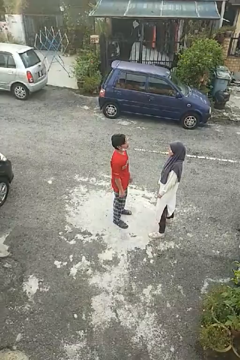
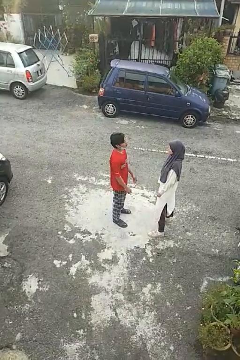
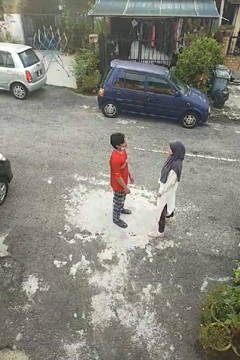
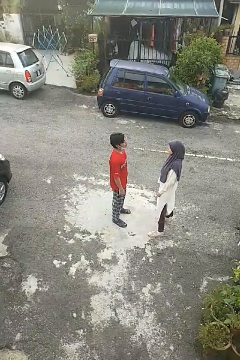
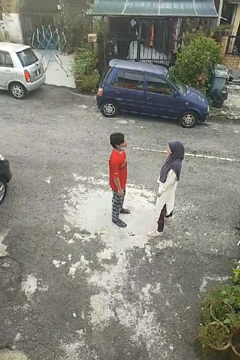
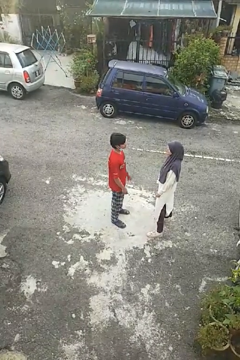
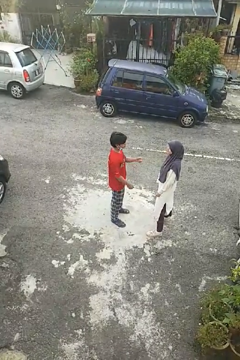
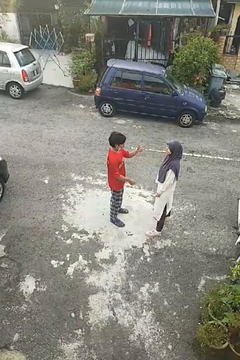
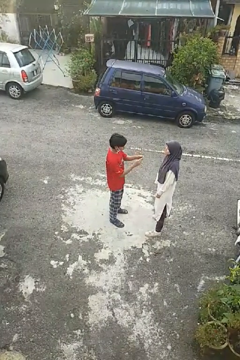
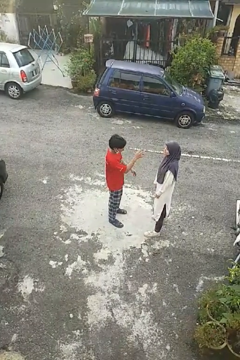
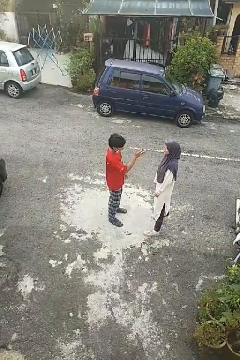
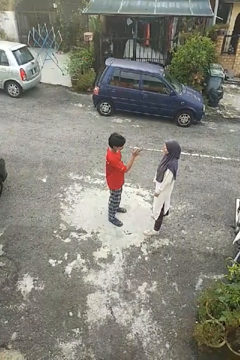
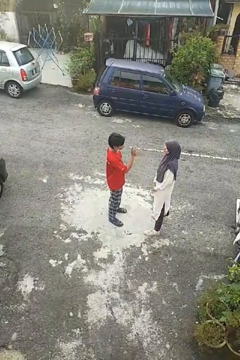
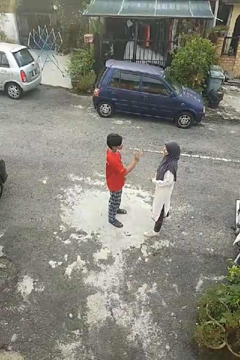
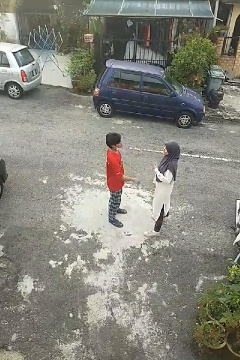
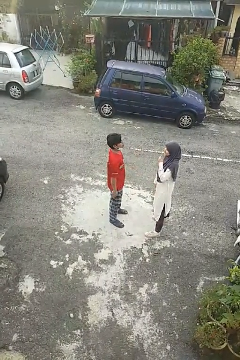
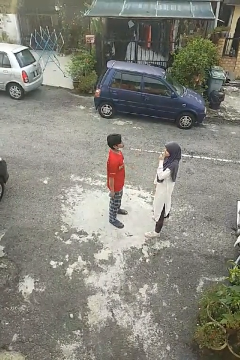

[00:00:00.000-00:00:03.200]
person talks to person

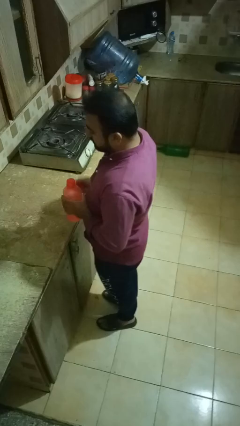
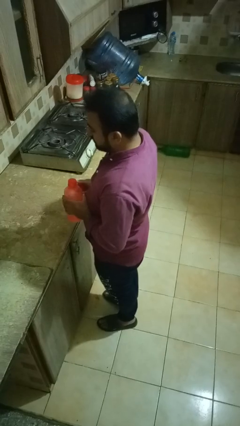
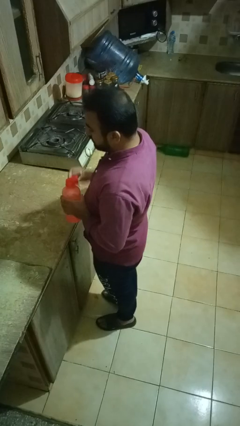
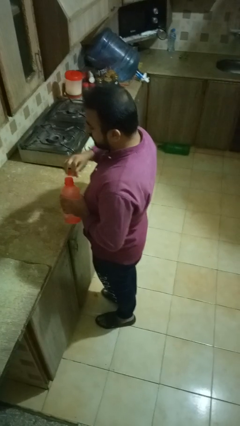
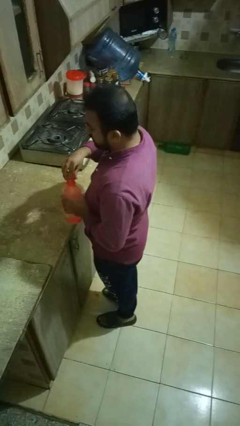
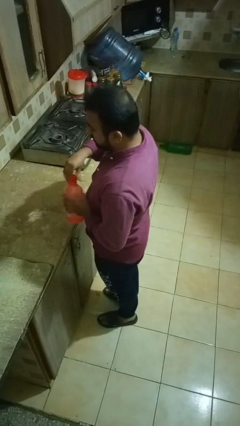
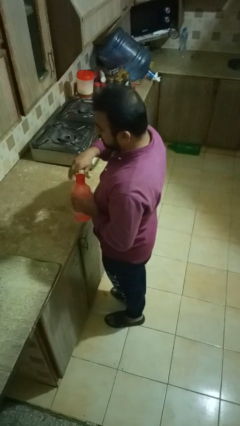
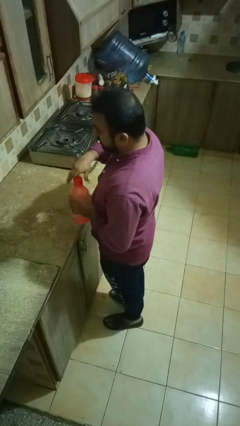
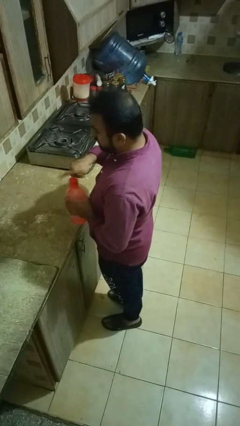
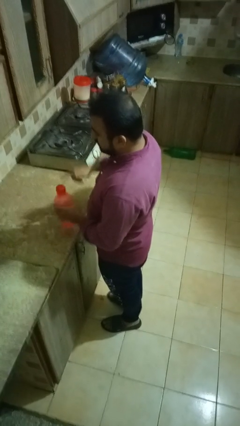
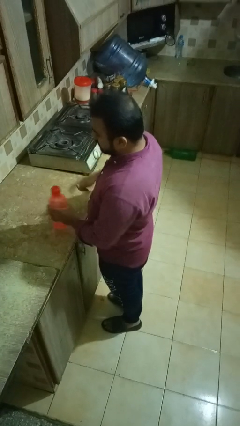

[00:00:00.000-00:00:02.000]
person screws lid to bottle

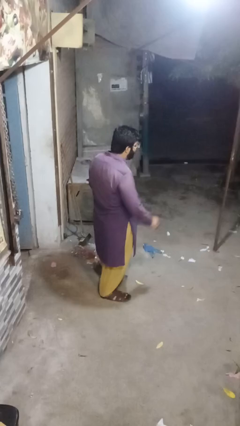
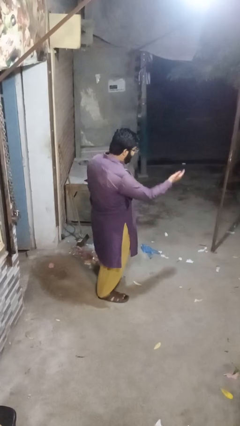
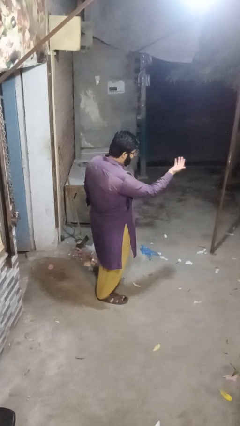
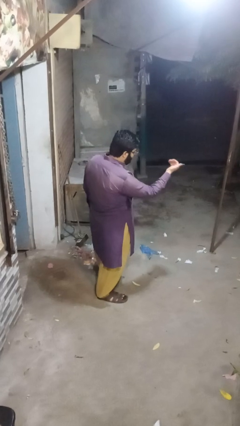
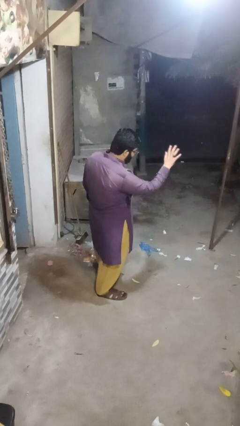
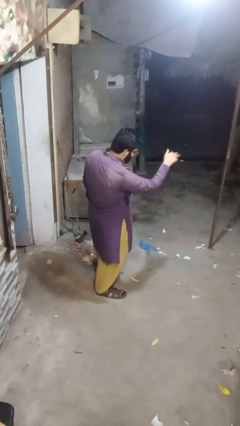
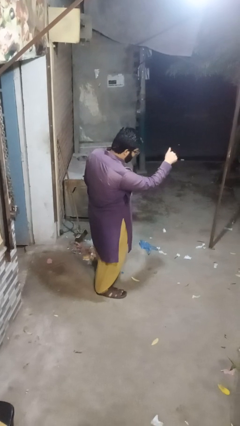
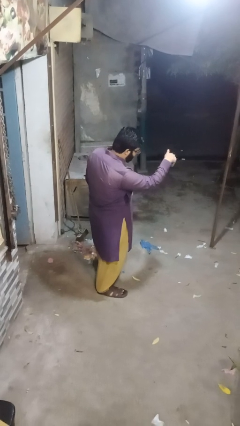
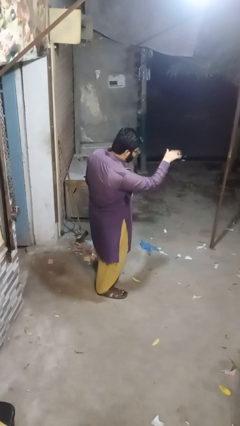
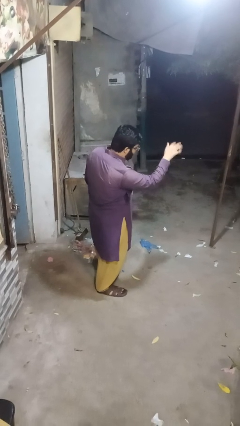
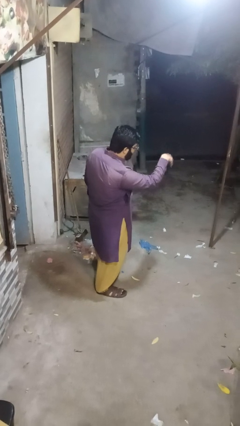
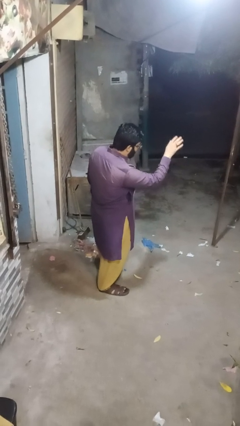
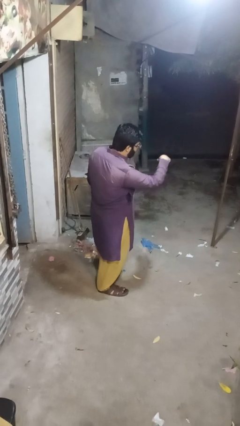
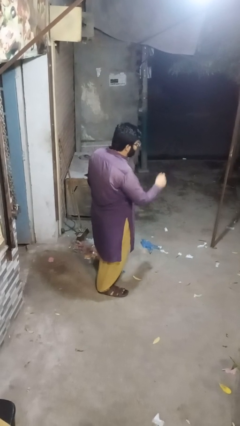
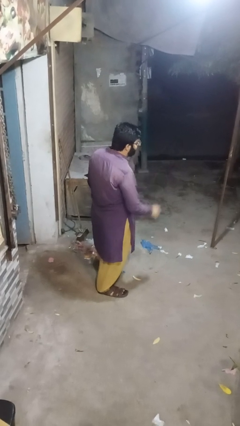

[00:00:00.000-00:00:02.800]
person gestures come here

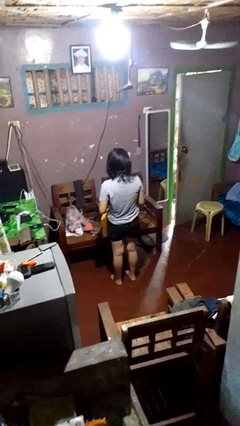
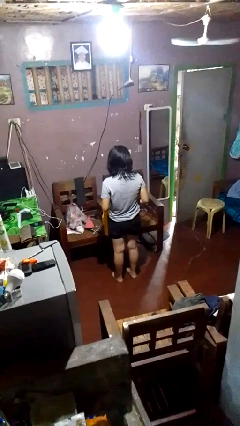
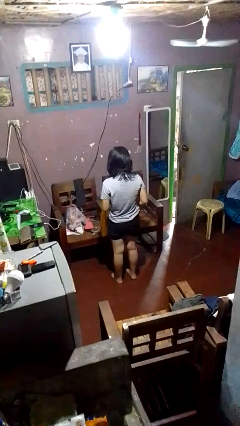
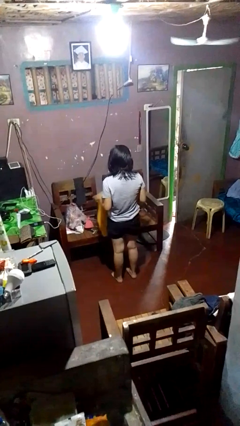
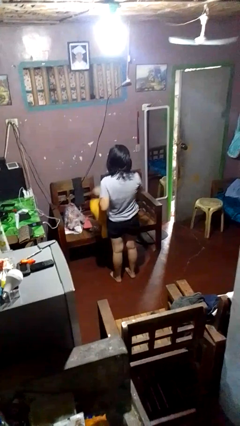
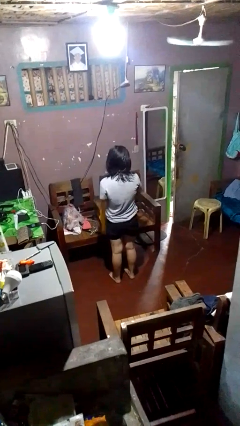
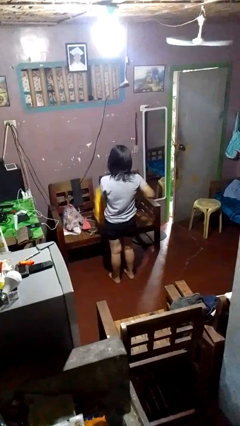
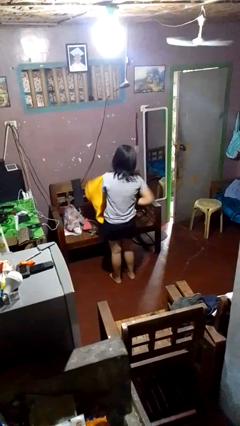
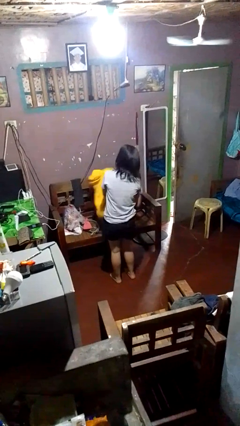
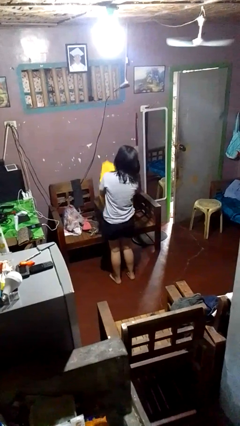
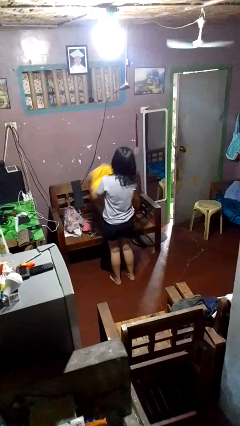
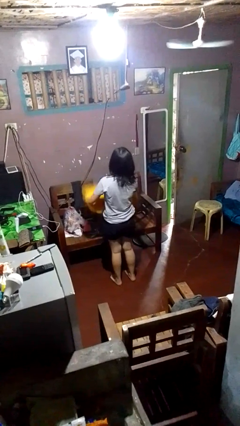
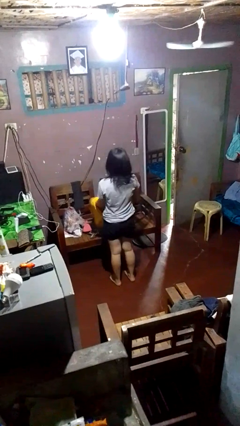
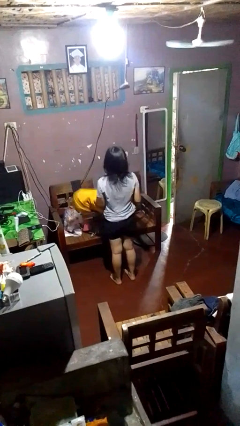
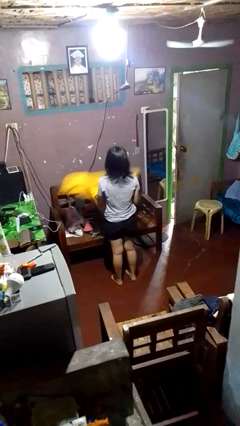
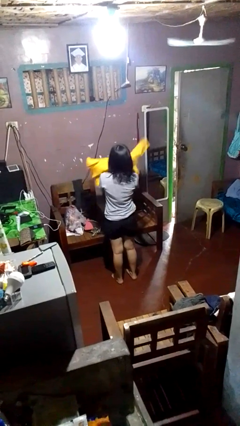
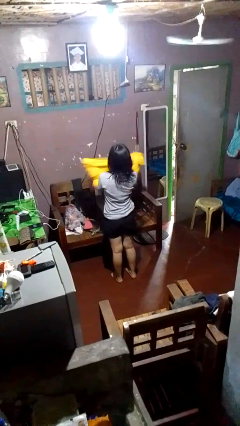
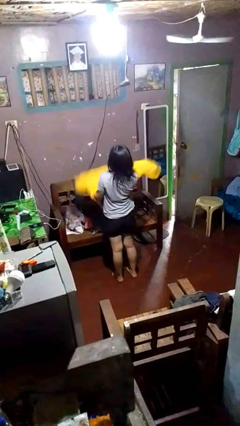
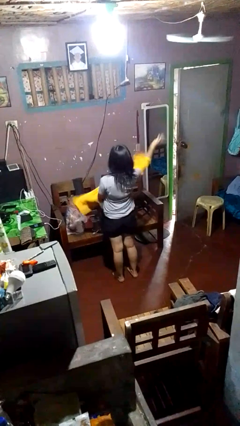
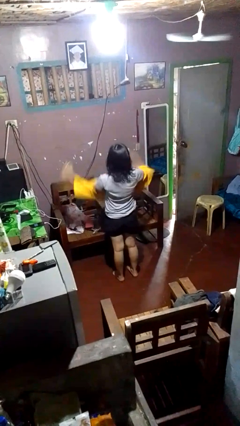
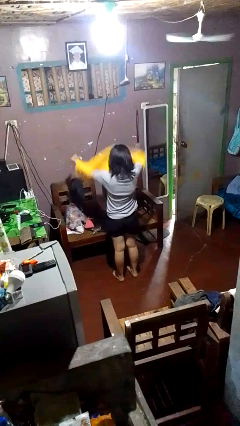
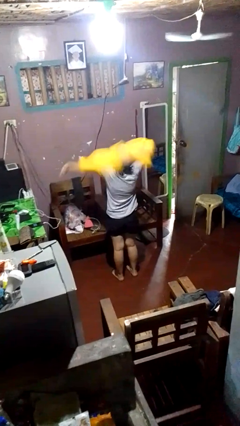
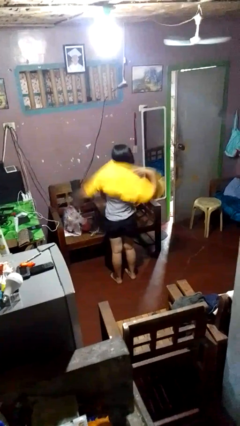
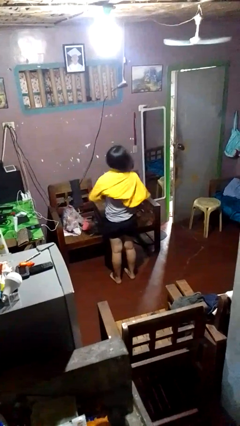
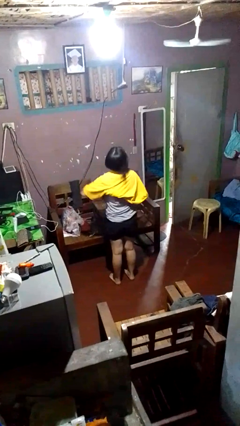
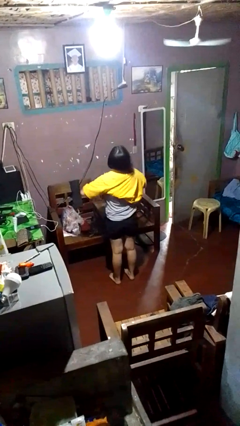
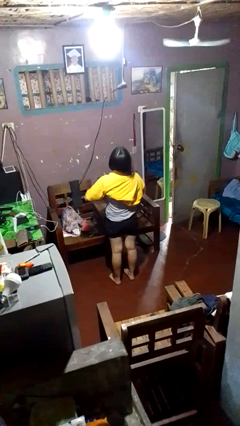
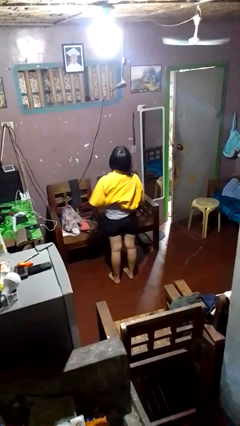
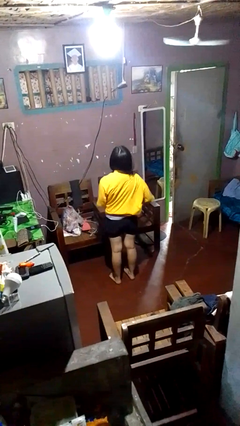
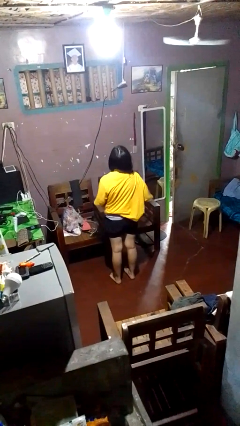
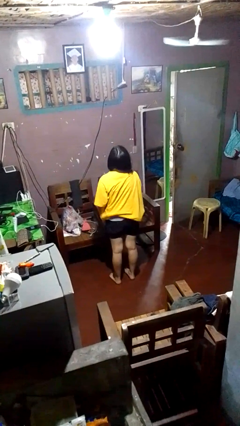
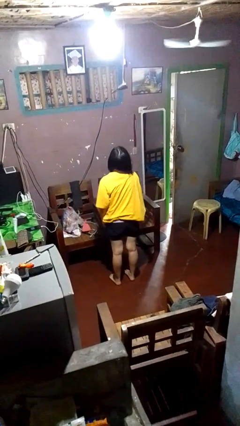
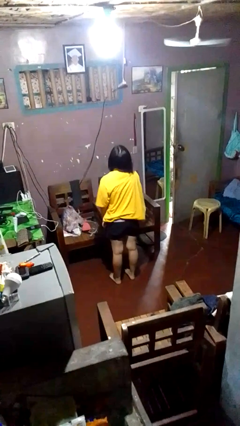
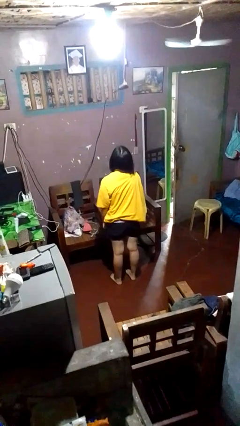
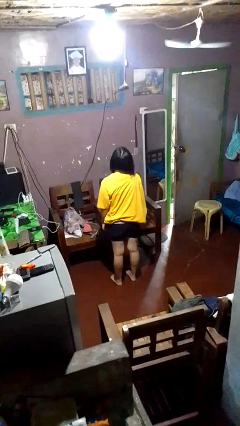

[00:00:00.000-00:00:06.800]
person puts on shirt

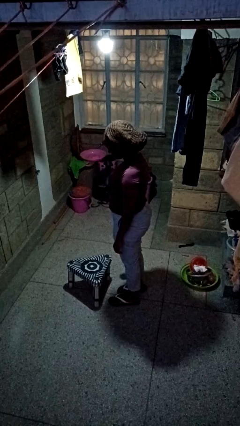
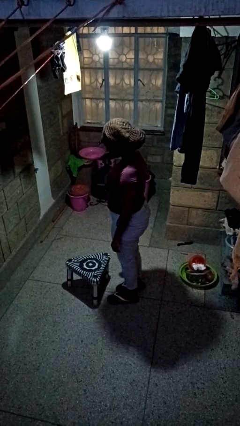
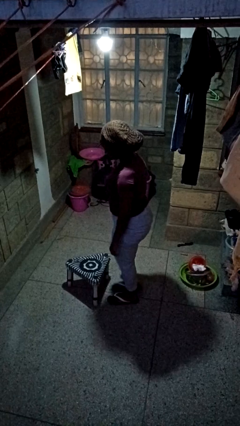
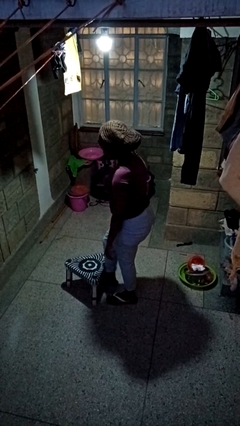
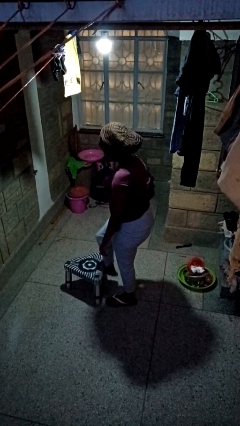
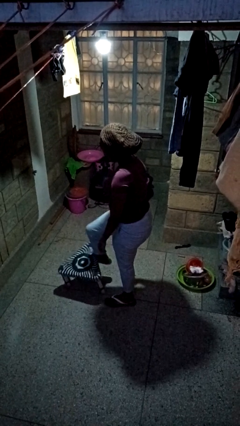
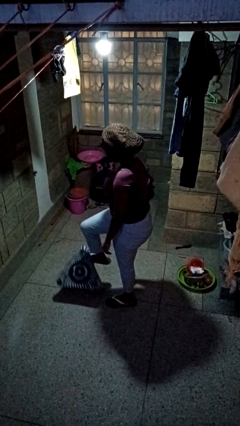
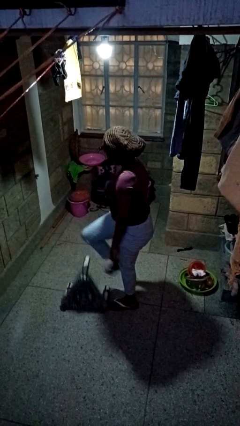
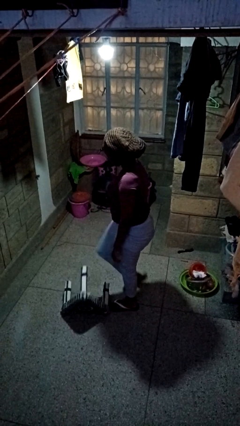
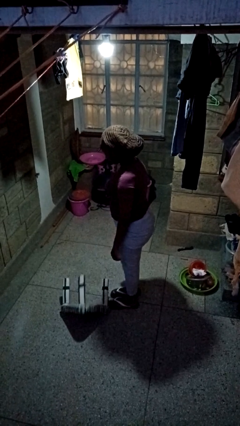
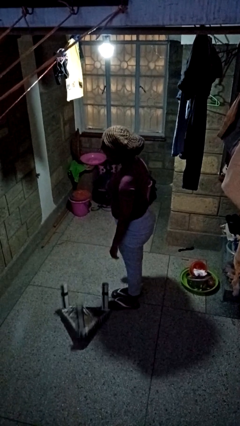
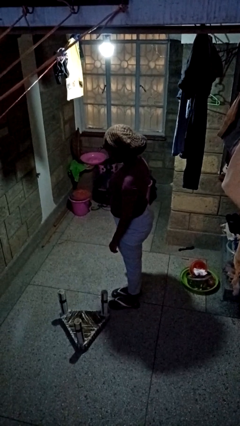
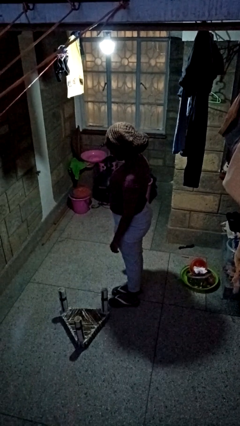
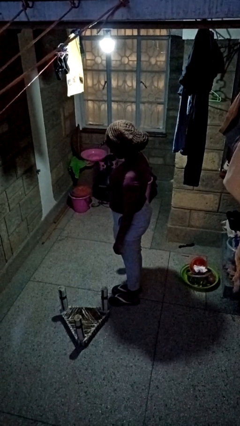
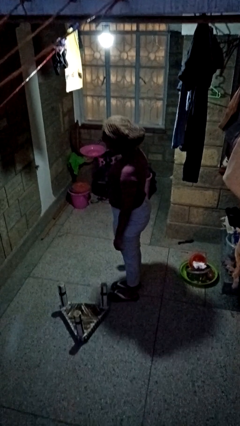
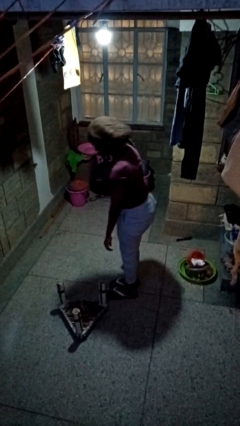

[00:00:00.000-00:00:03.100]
person knocks over furniture
